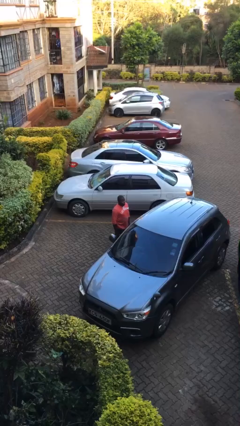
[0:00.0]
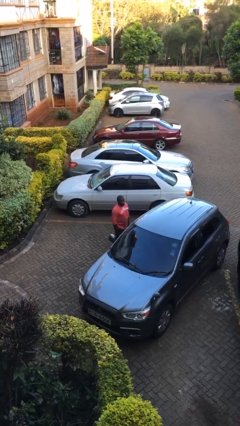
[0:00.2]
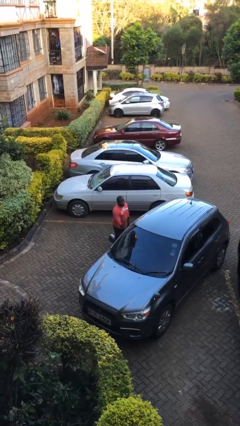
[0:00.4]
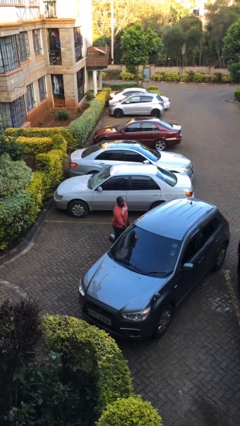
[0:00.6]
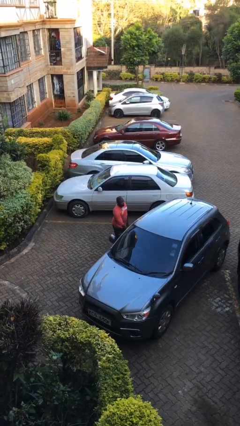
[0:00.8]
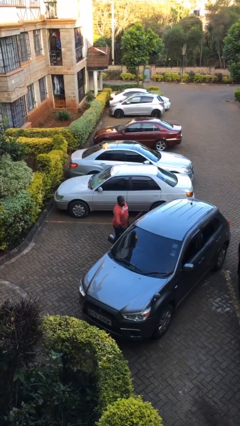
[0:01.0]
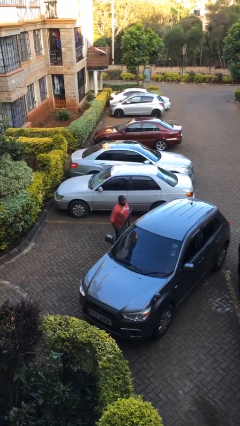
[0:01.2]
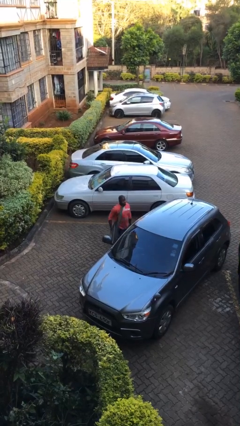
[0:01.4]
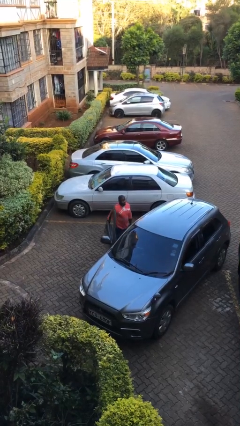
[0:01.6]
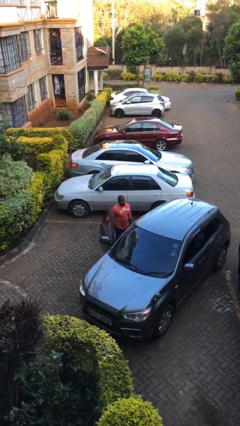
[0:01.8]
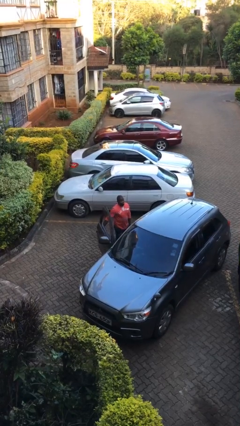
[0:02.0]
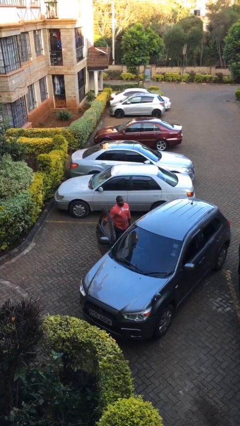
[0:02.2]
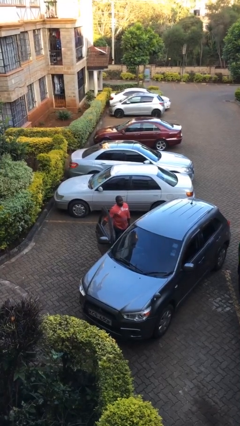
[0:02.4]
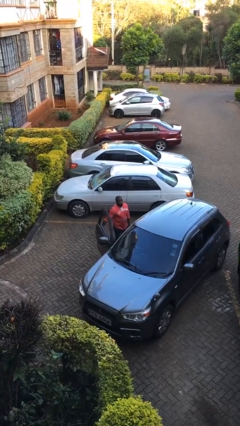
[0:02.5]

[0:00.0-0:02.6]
person opens car door

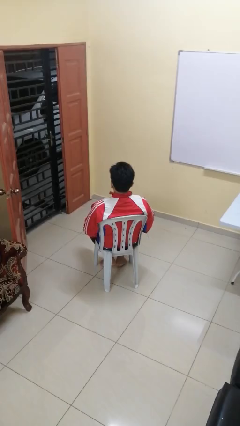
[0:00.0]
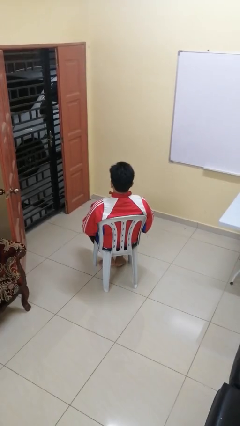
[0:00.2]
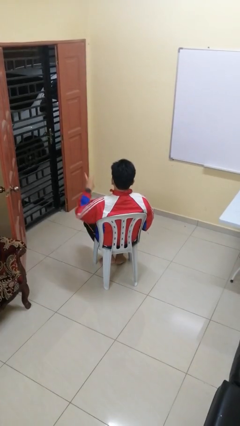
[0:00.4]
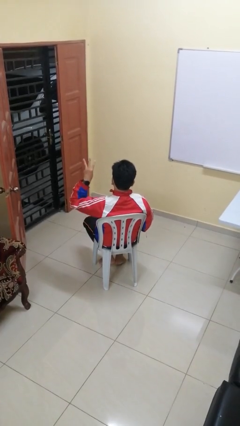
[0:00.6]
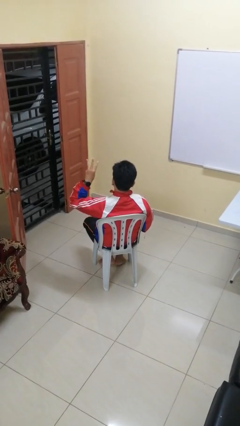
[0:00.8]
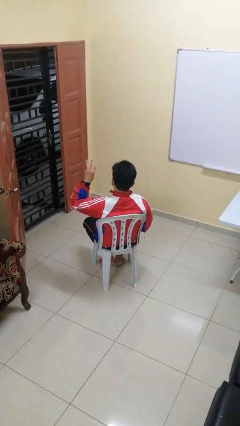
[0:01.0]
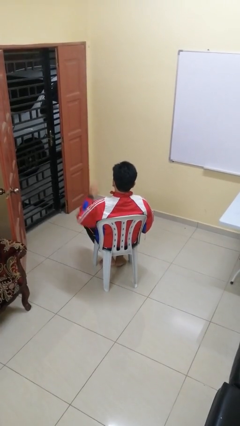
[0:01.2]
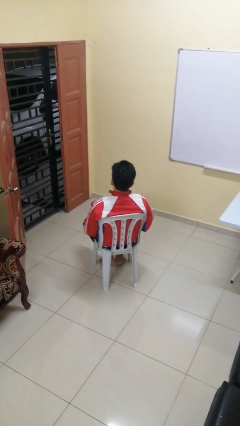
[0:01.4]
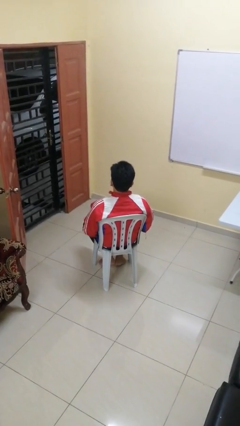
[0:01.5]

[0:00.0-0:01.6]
person gestures number three

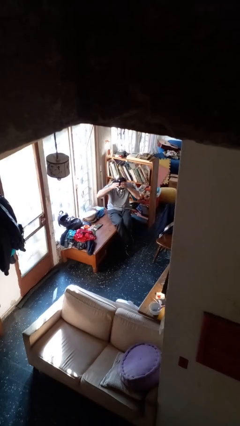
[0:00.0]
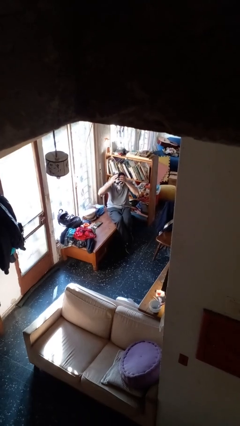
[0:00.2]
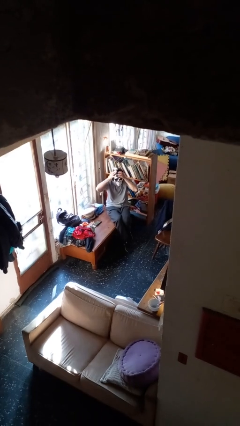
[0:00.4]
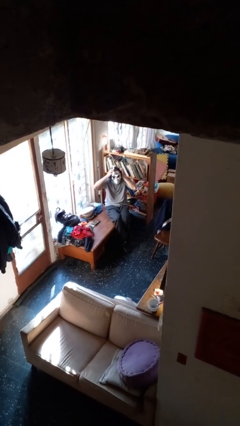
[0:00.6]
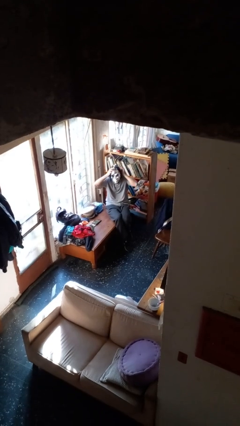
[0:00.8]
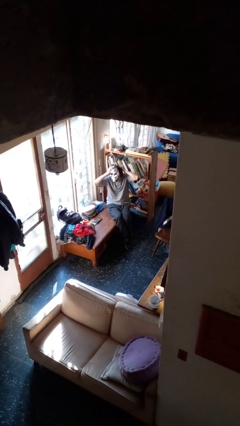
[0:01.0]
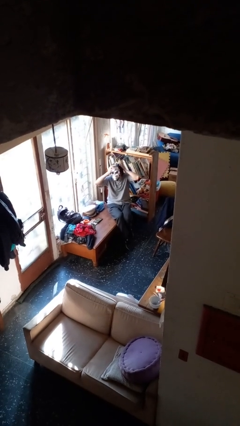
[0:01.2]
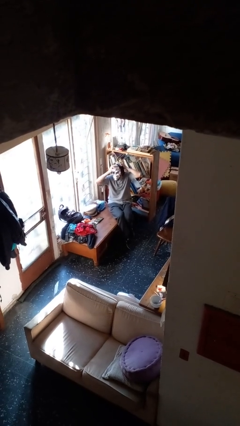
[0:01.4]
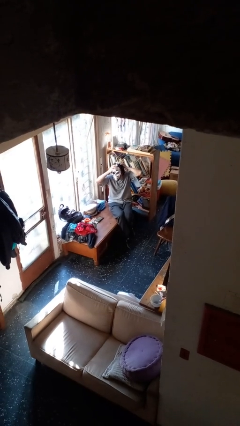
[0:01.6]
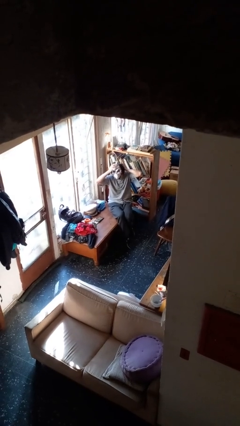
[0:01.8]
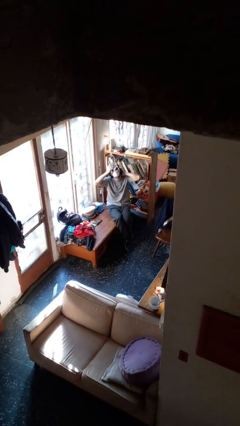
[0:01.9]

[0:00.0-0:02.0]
person puts on facemask

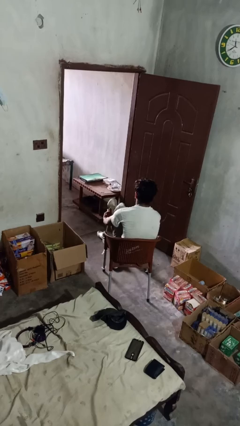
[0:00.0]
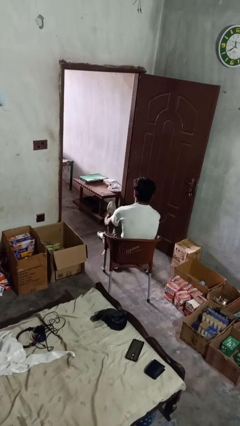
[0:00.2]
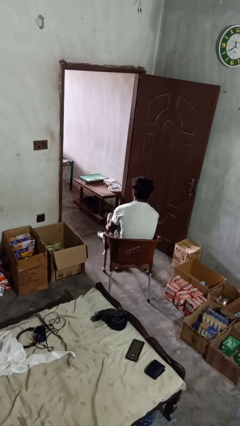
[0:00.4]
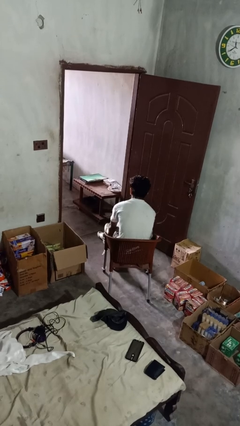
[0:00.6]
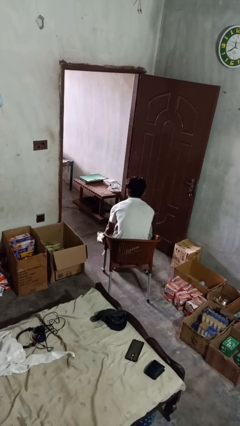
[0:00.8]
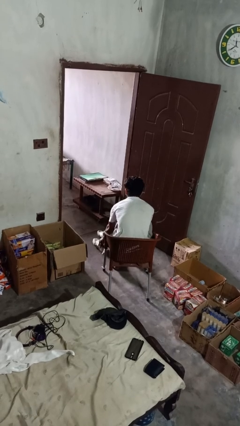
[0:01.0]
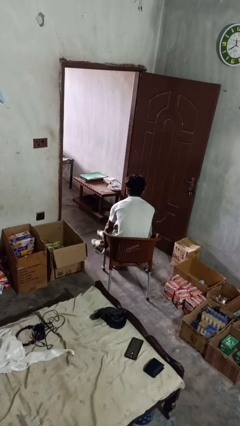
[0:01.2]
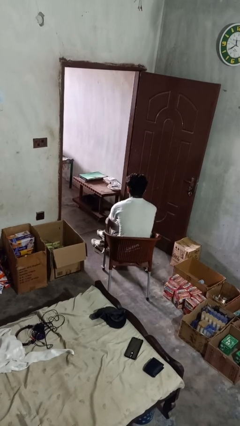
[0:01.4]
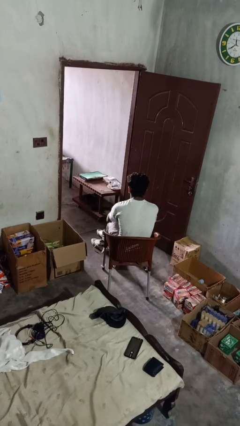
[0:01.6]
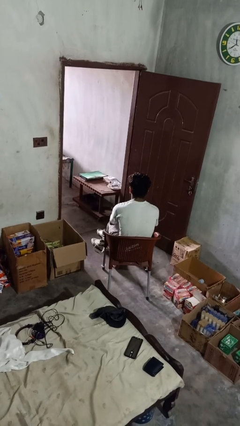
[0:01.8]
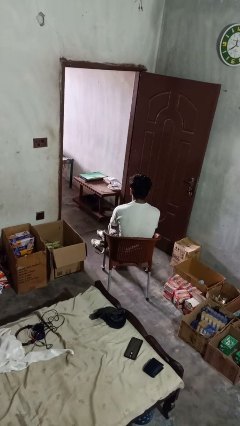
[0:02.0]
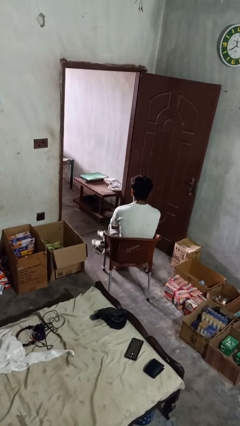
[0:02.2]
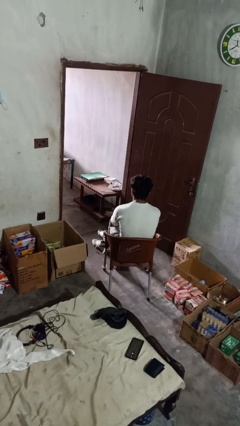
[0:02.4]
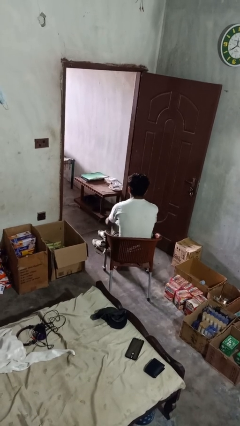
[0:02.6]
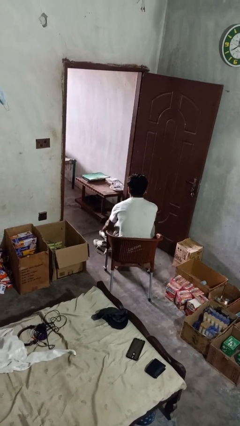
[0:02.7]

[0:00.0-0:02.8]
person takes off shoes

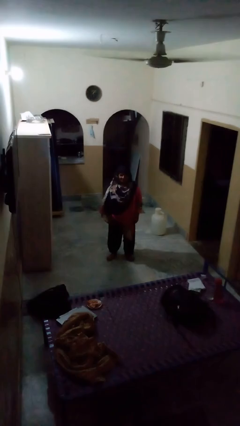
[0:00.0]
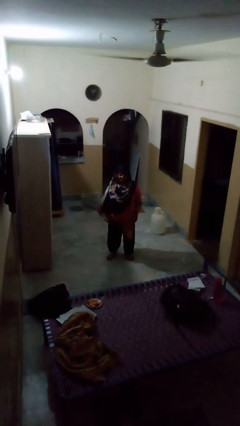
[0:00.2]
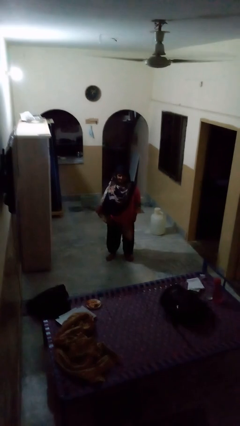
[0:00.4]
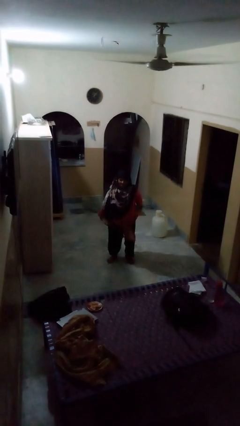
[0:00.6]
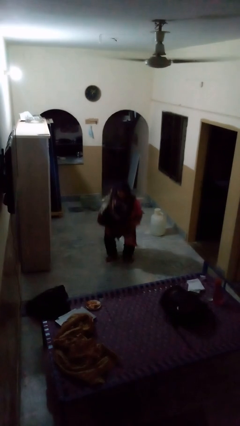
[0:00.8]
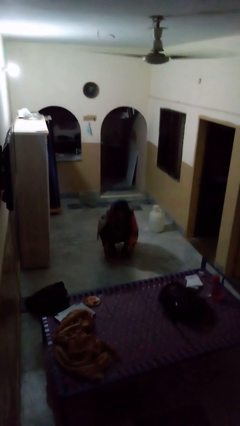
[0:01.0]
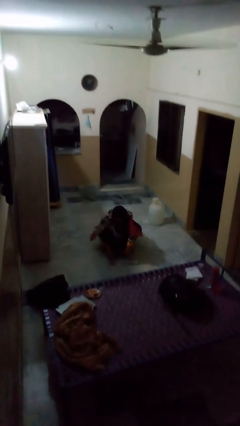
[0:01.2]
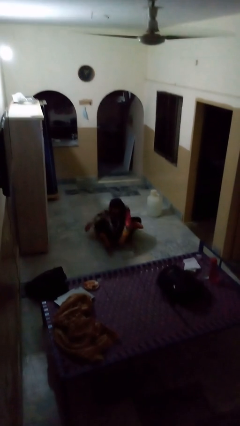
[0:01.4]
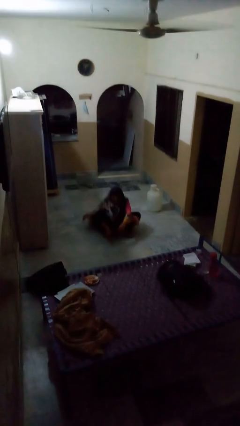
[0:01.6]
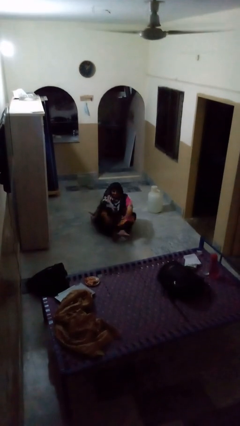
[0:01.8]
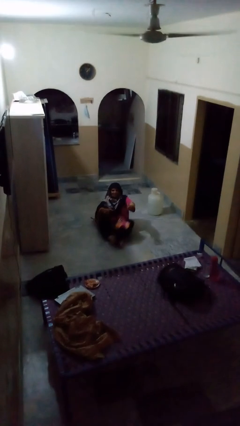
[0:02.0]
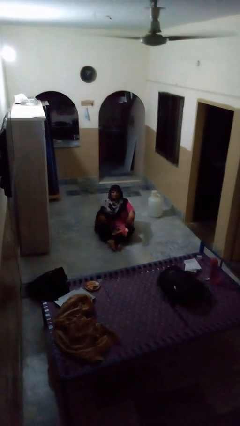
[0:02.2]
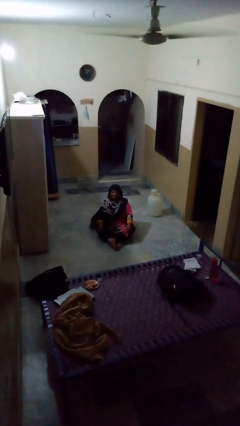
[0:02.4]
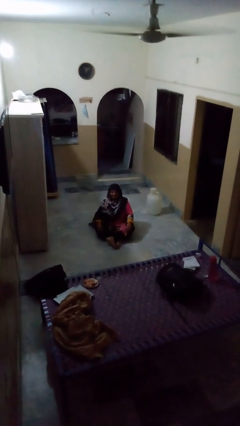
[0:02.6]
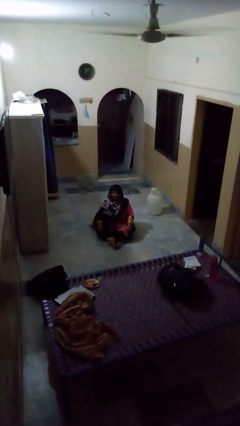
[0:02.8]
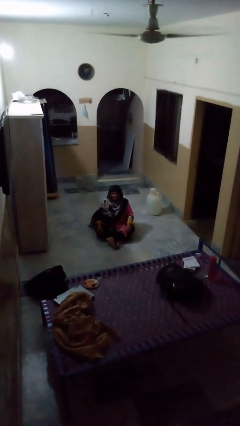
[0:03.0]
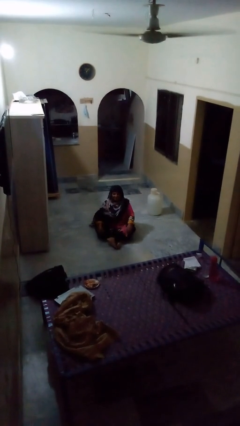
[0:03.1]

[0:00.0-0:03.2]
person sits crisscross

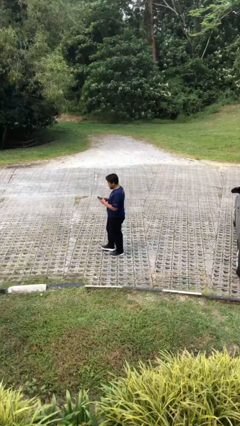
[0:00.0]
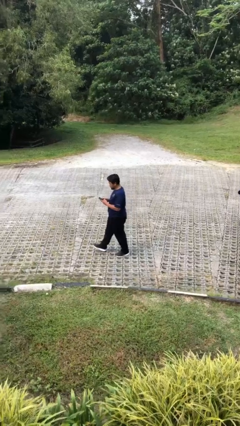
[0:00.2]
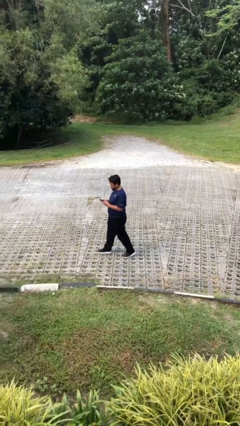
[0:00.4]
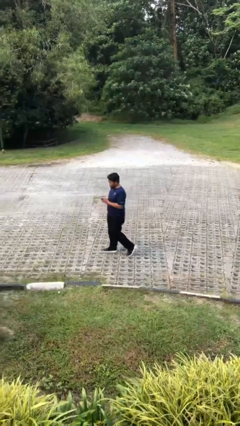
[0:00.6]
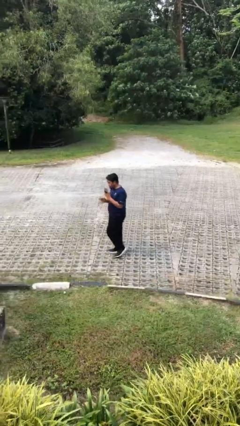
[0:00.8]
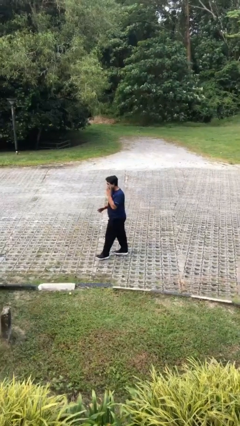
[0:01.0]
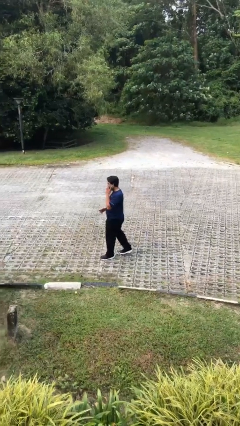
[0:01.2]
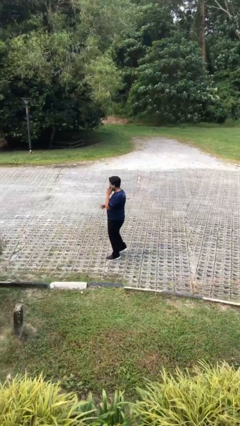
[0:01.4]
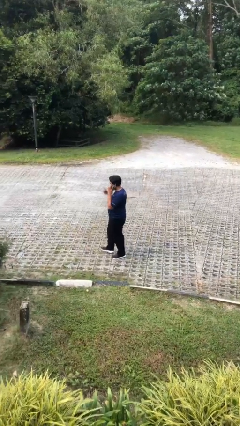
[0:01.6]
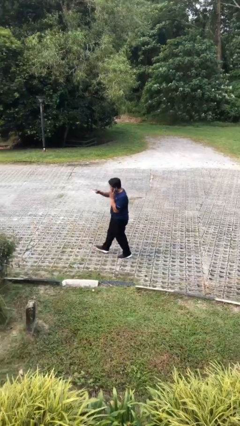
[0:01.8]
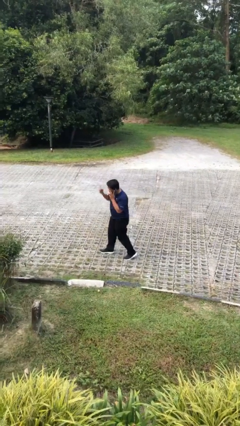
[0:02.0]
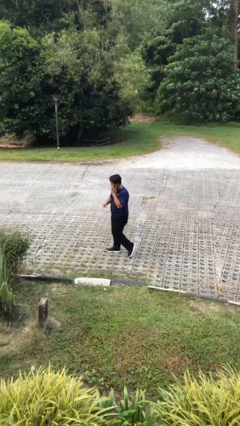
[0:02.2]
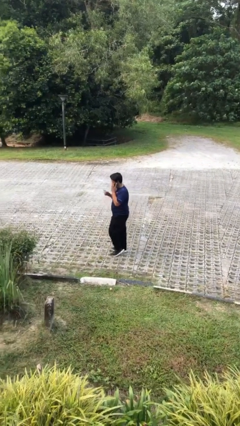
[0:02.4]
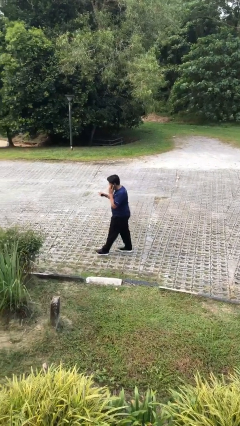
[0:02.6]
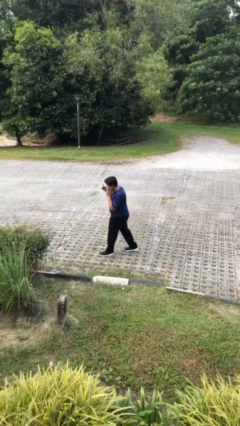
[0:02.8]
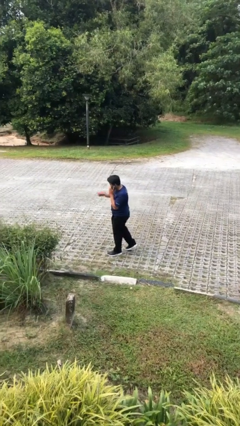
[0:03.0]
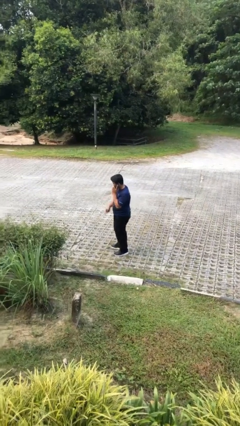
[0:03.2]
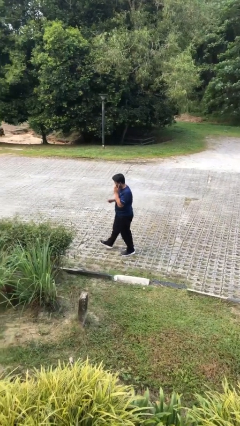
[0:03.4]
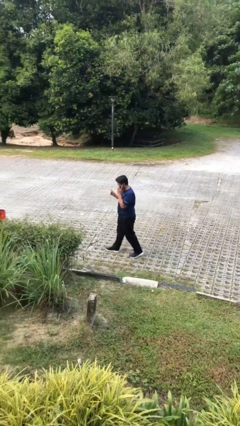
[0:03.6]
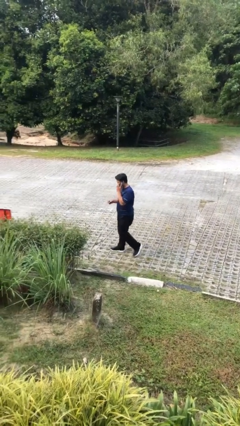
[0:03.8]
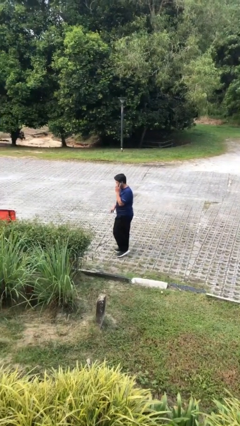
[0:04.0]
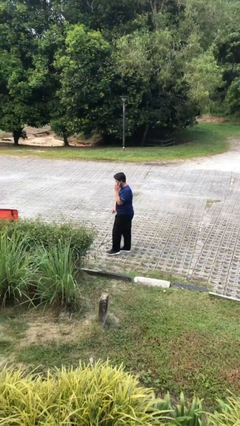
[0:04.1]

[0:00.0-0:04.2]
person talks on phone

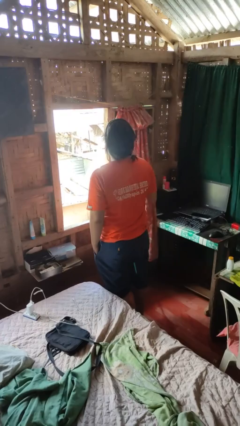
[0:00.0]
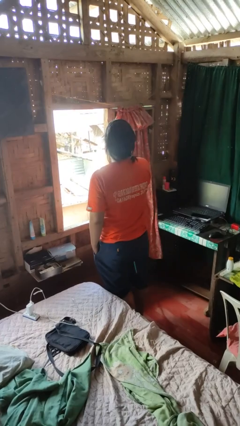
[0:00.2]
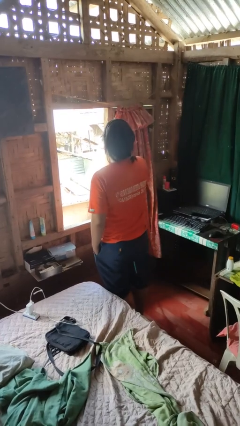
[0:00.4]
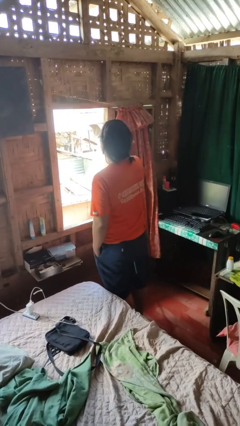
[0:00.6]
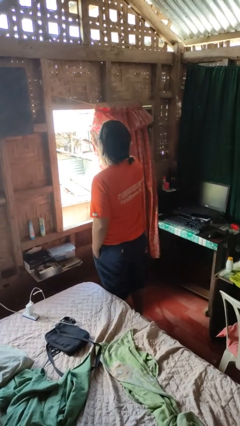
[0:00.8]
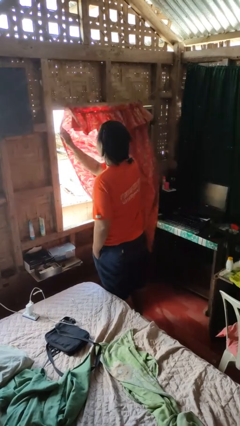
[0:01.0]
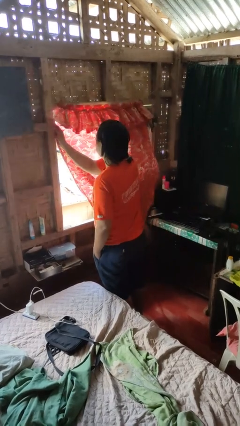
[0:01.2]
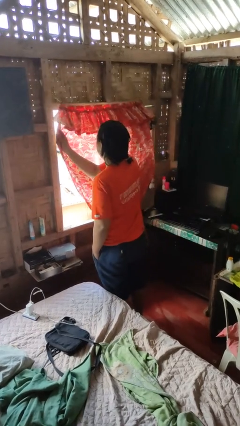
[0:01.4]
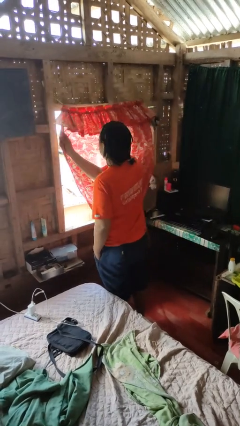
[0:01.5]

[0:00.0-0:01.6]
person closes curtains
